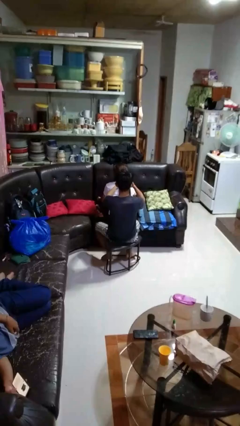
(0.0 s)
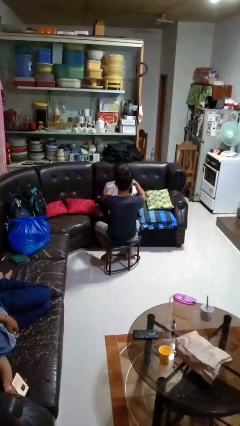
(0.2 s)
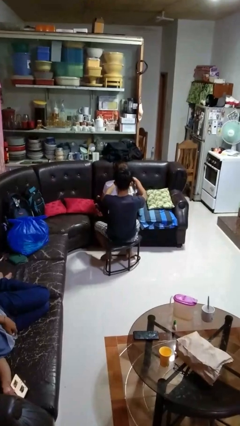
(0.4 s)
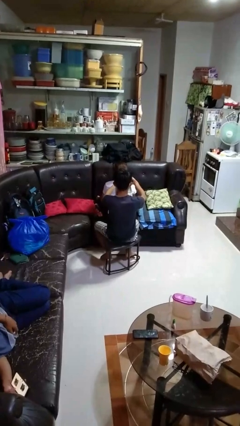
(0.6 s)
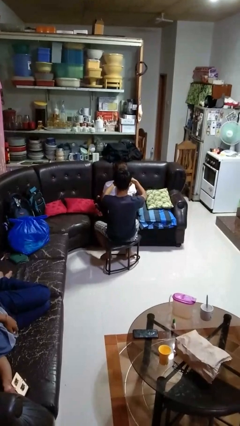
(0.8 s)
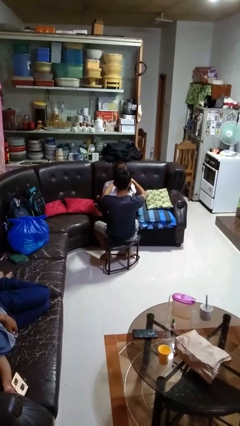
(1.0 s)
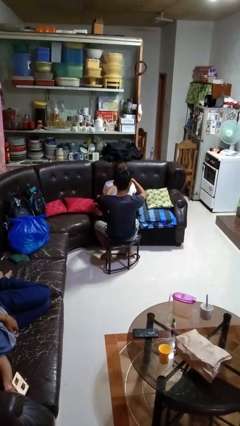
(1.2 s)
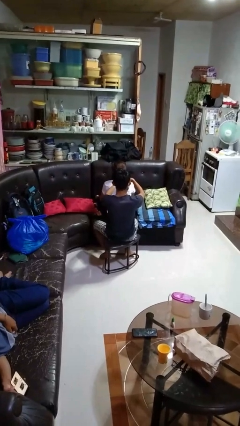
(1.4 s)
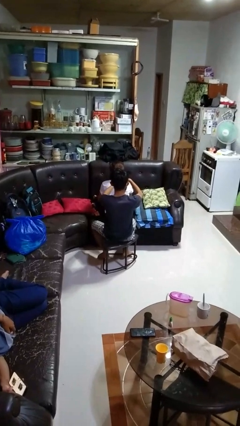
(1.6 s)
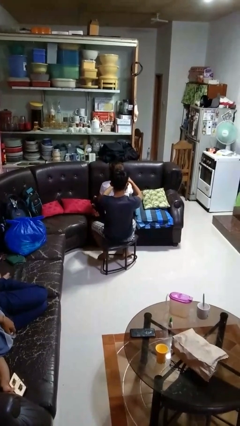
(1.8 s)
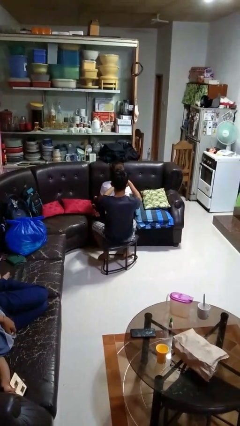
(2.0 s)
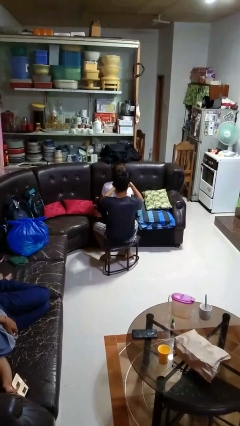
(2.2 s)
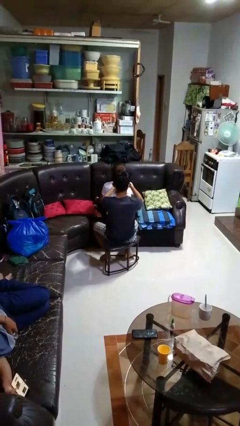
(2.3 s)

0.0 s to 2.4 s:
person braids hair of person

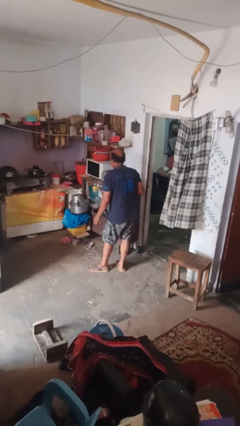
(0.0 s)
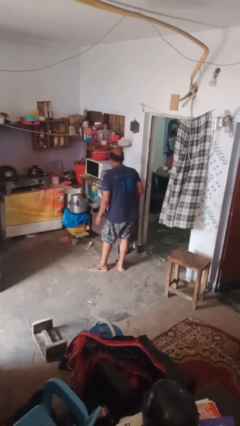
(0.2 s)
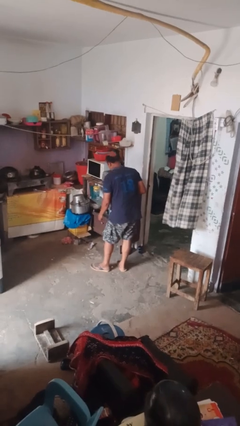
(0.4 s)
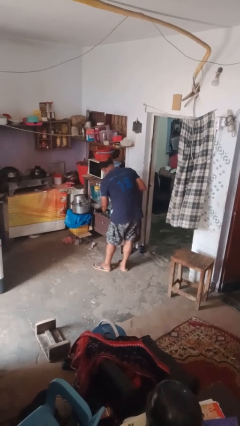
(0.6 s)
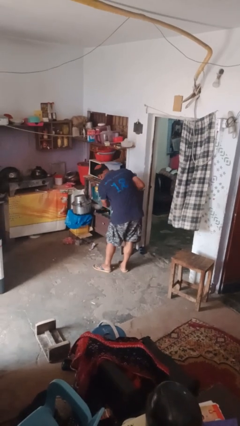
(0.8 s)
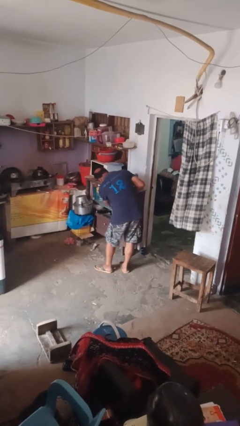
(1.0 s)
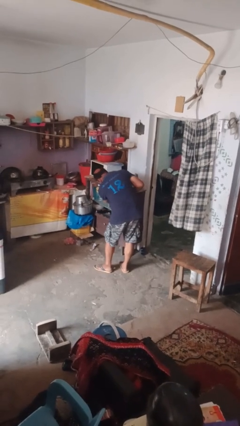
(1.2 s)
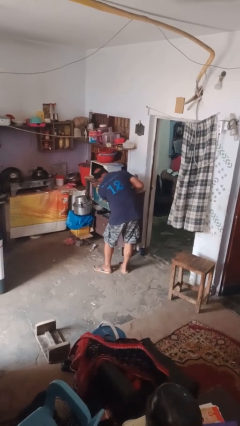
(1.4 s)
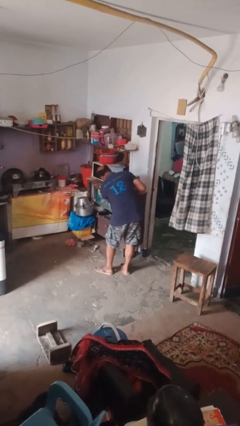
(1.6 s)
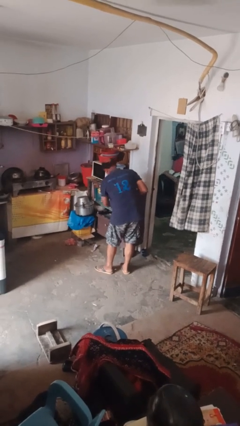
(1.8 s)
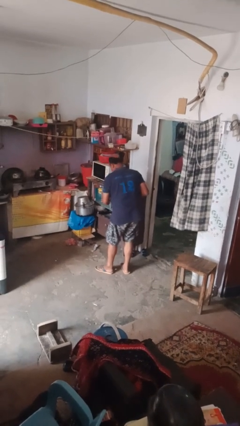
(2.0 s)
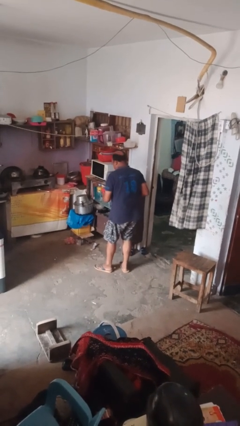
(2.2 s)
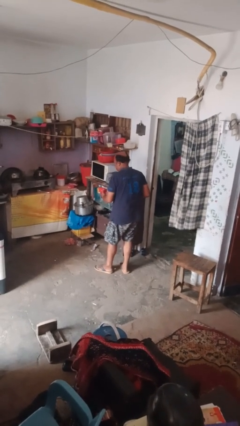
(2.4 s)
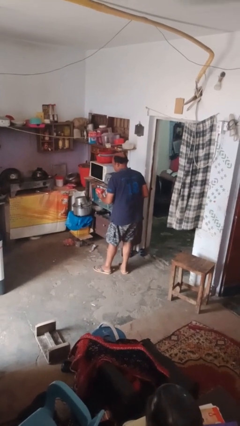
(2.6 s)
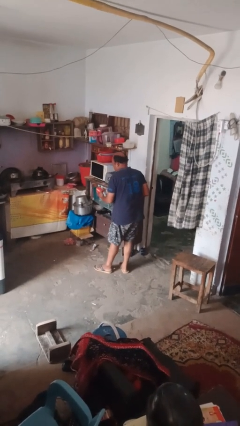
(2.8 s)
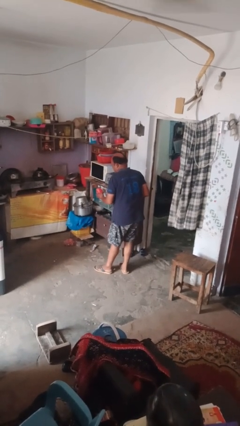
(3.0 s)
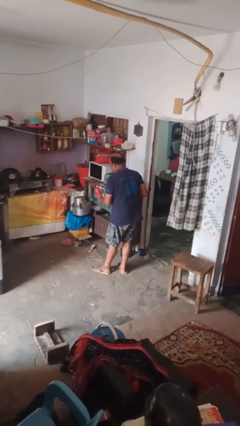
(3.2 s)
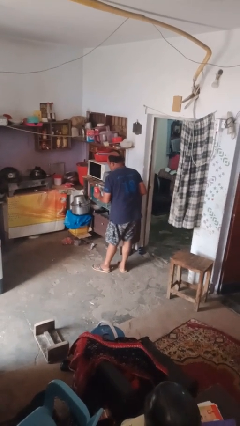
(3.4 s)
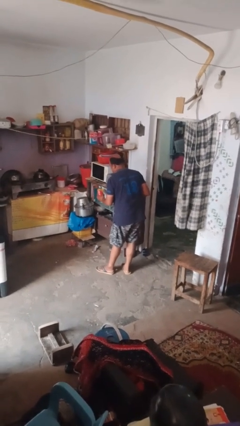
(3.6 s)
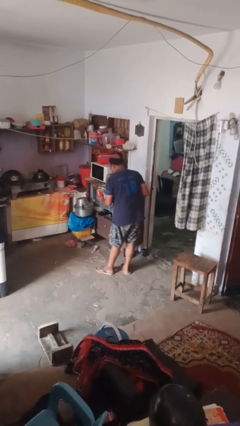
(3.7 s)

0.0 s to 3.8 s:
person takes object from kitchen drawer

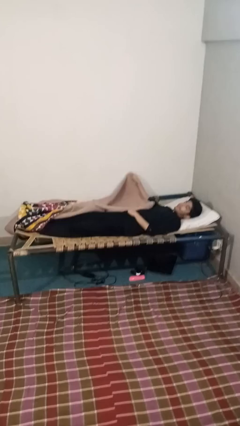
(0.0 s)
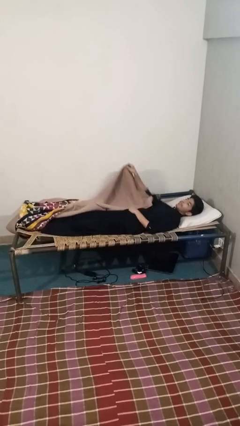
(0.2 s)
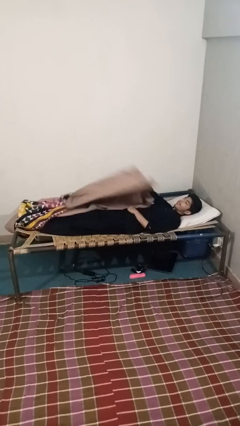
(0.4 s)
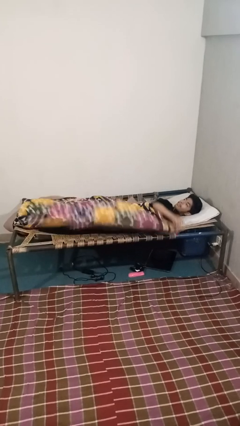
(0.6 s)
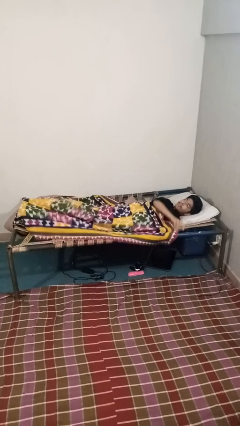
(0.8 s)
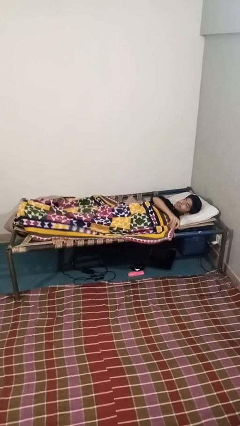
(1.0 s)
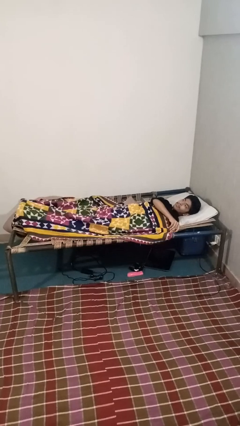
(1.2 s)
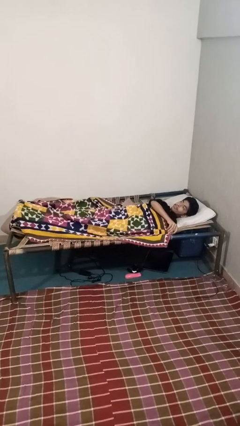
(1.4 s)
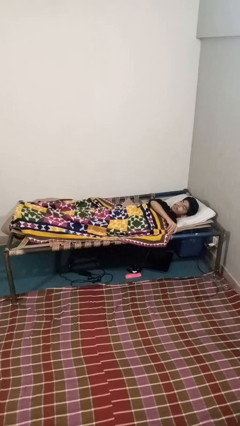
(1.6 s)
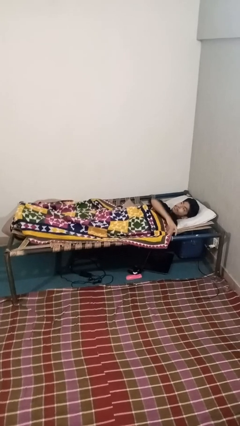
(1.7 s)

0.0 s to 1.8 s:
person covers with bedsheets

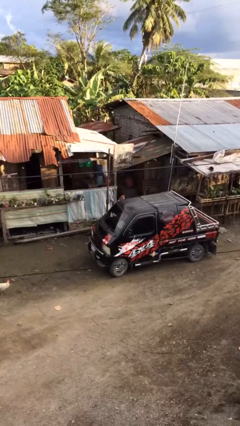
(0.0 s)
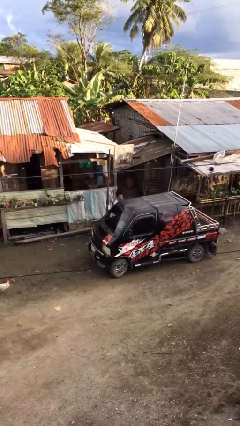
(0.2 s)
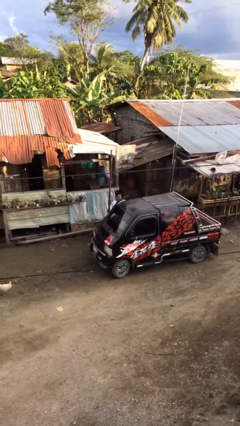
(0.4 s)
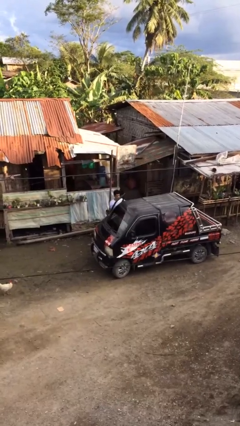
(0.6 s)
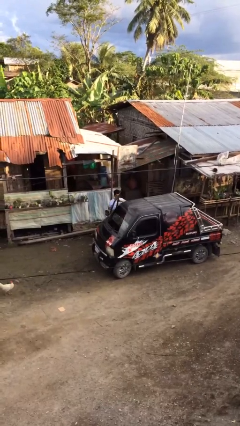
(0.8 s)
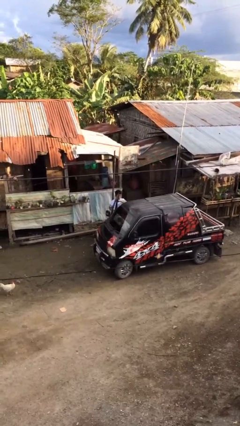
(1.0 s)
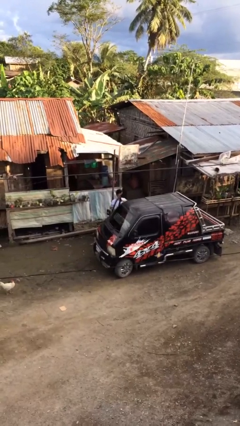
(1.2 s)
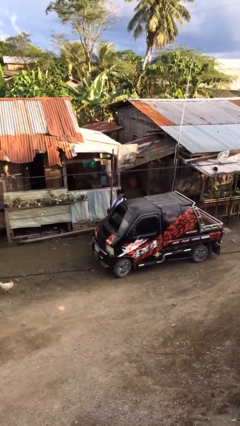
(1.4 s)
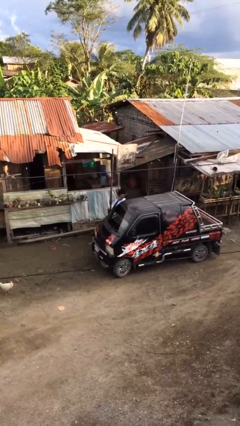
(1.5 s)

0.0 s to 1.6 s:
person opens car door

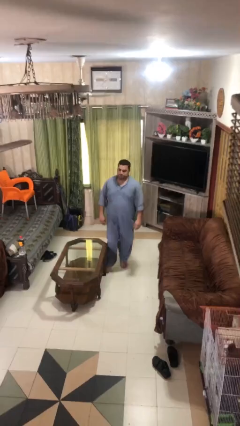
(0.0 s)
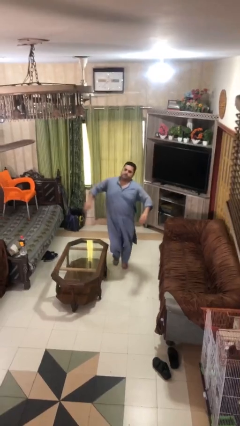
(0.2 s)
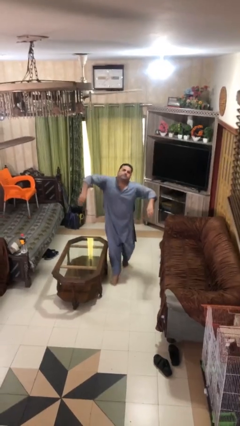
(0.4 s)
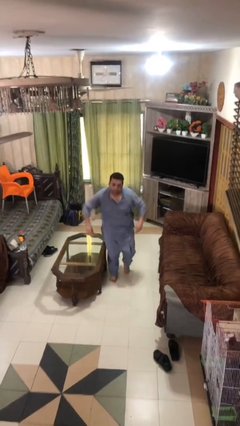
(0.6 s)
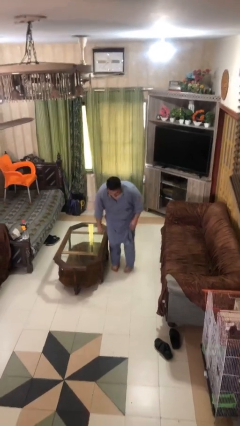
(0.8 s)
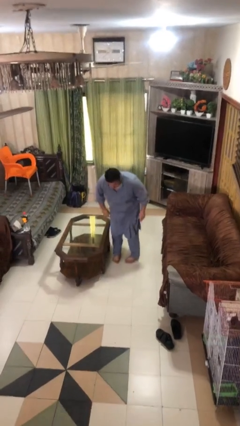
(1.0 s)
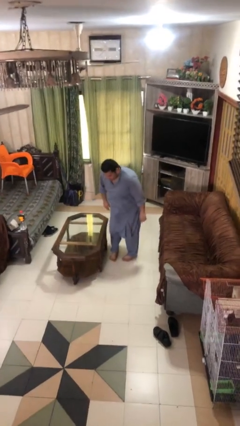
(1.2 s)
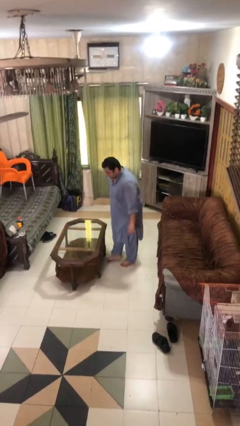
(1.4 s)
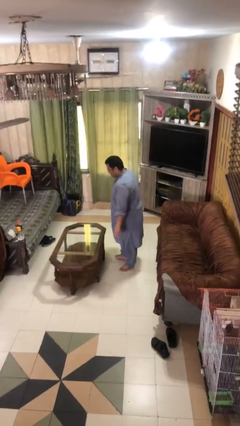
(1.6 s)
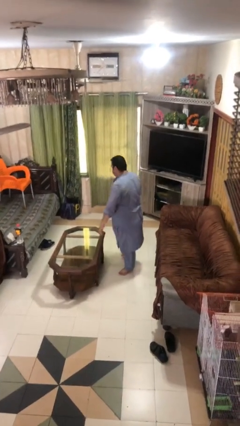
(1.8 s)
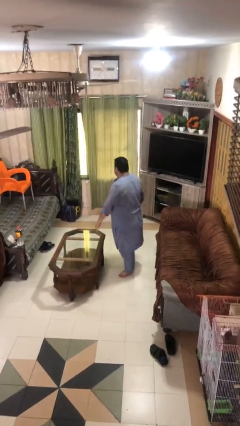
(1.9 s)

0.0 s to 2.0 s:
person bumps into table

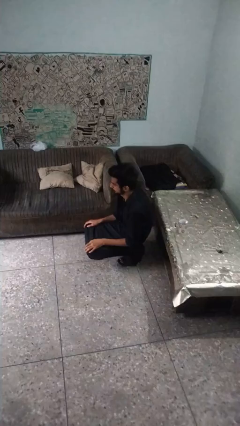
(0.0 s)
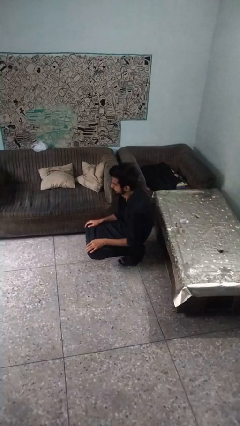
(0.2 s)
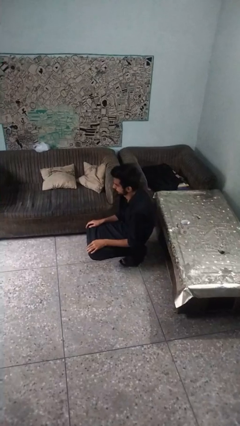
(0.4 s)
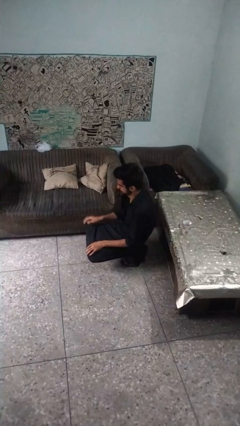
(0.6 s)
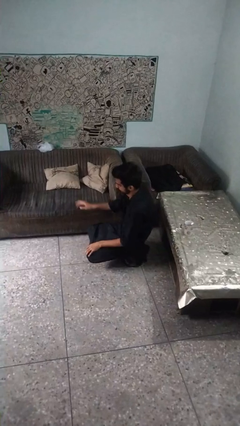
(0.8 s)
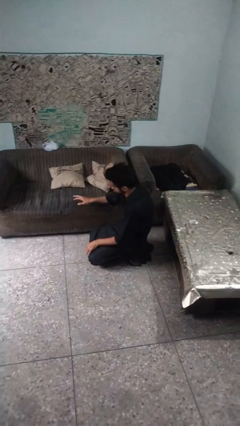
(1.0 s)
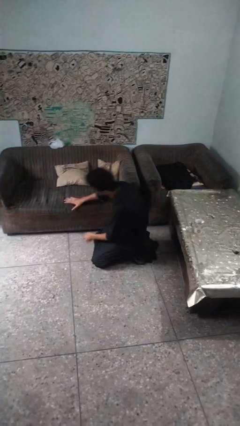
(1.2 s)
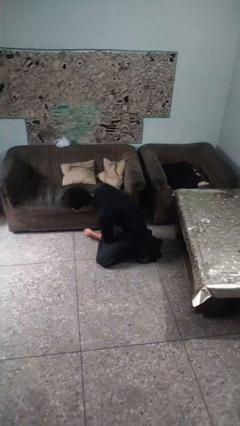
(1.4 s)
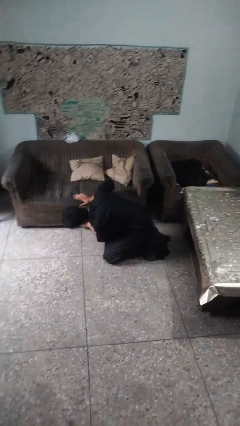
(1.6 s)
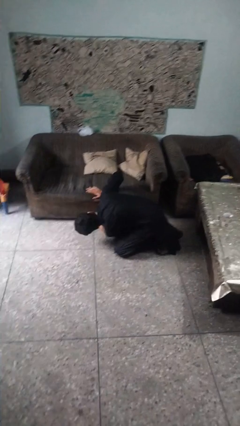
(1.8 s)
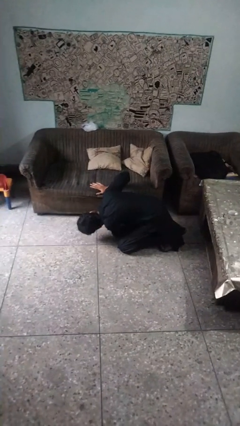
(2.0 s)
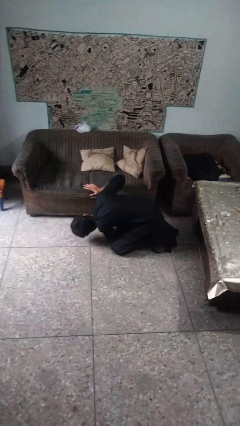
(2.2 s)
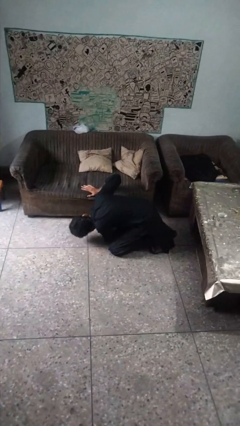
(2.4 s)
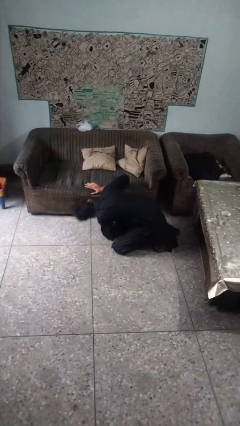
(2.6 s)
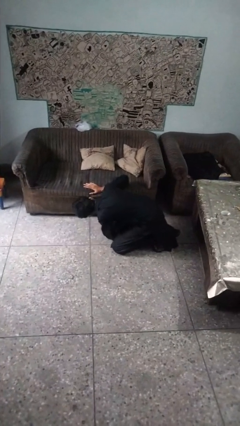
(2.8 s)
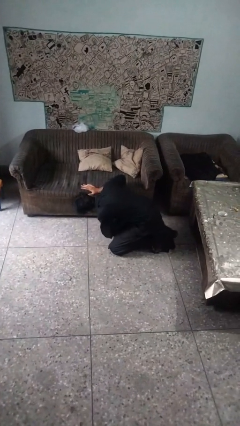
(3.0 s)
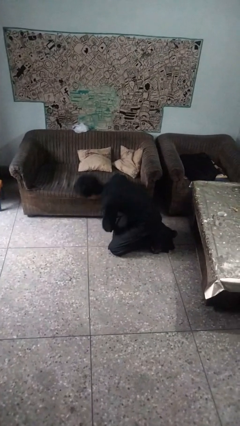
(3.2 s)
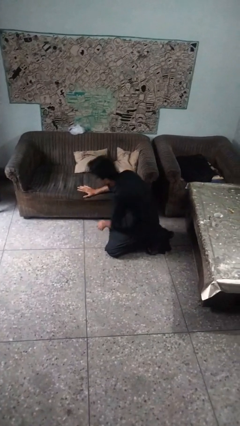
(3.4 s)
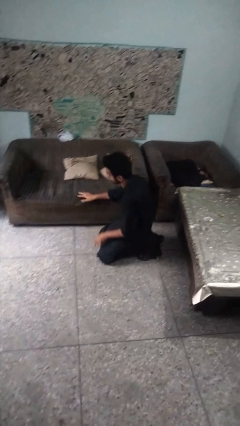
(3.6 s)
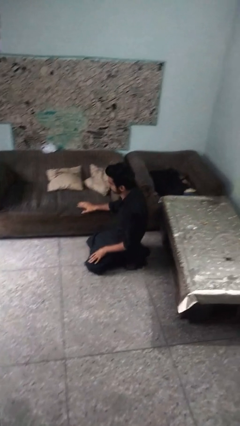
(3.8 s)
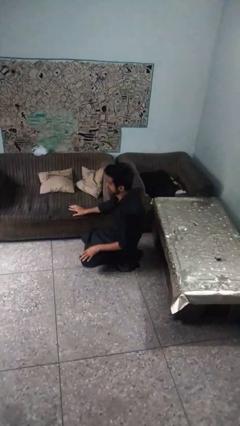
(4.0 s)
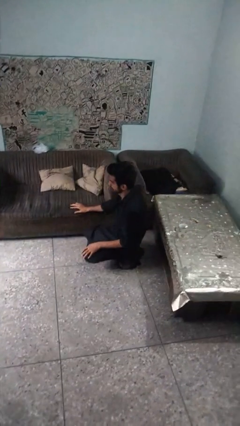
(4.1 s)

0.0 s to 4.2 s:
person searches under couch

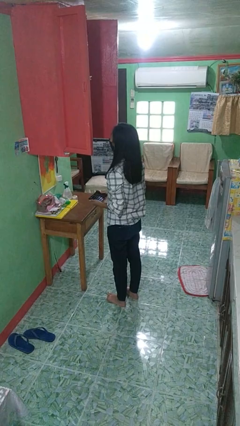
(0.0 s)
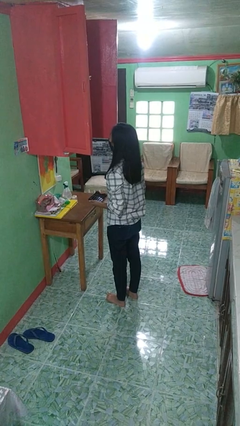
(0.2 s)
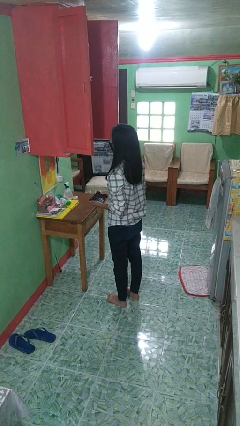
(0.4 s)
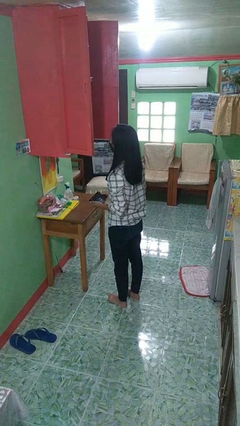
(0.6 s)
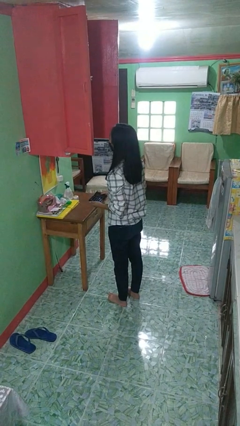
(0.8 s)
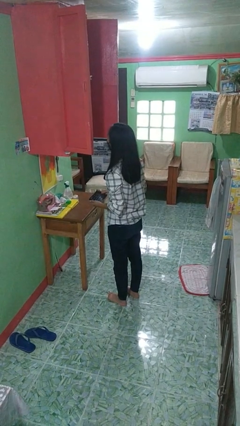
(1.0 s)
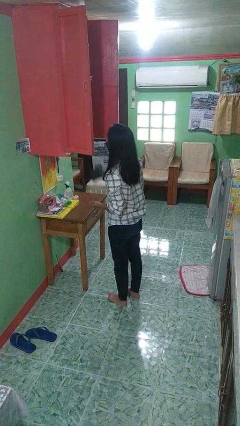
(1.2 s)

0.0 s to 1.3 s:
person puts down object into cabinet
